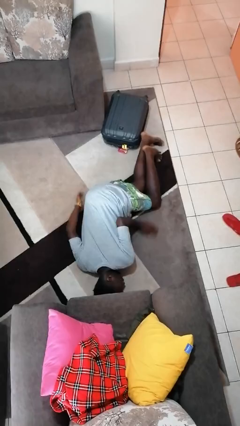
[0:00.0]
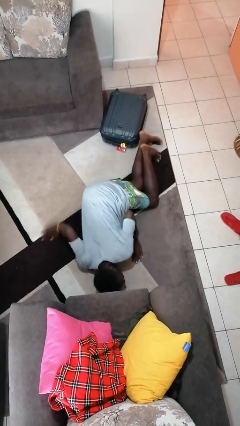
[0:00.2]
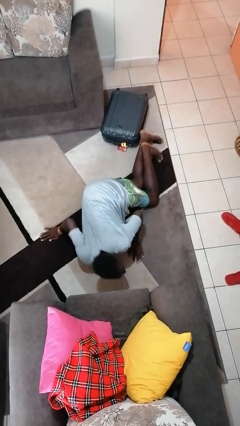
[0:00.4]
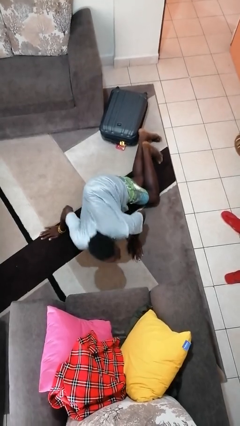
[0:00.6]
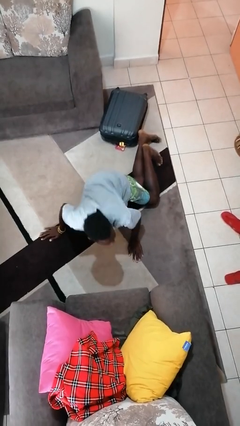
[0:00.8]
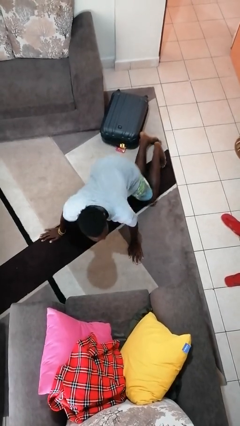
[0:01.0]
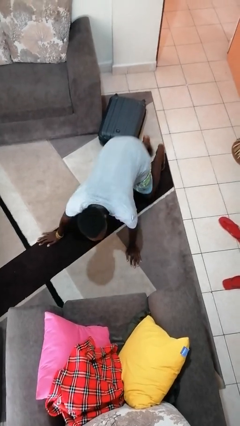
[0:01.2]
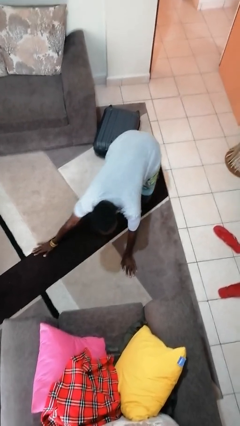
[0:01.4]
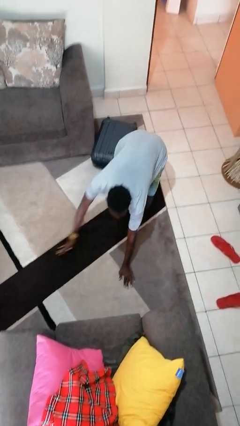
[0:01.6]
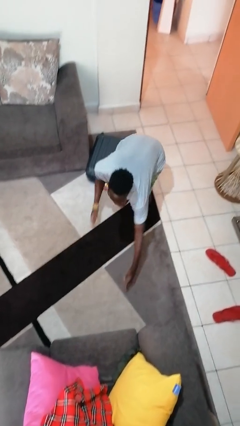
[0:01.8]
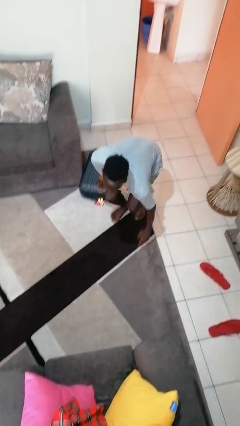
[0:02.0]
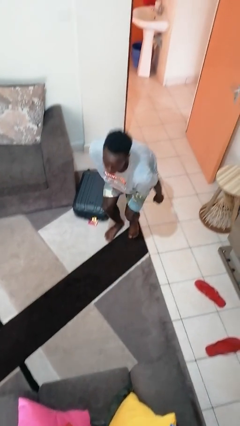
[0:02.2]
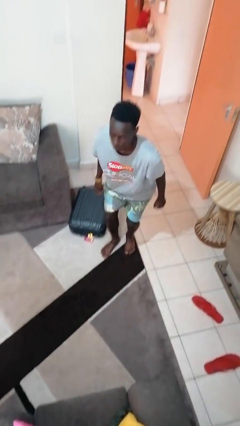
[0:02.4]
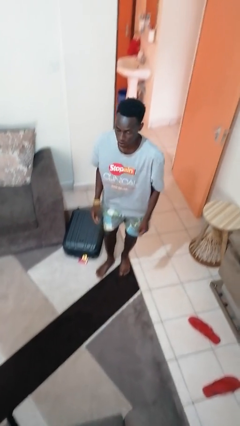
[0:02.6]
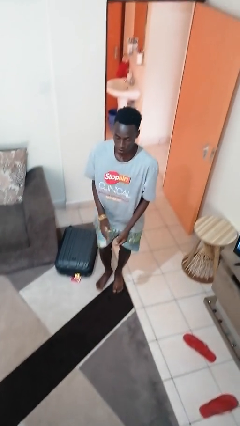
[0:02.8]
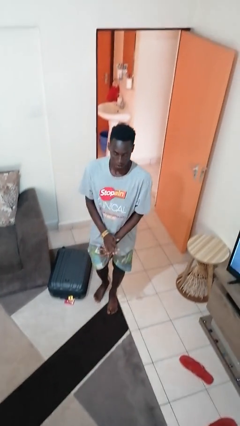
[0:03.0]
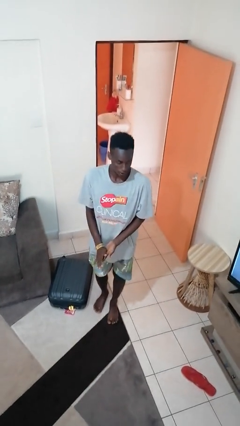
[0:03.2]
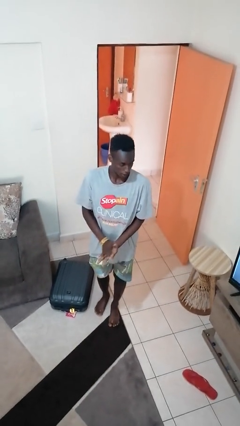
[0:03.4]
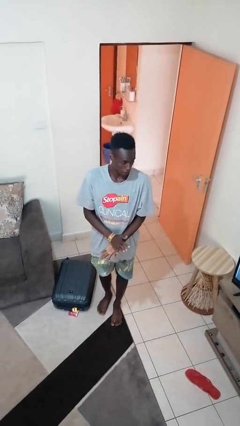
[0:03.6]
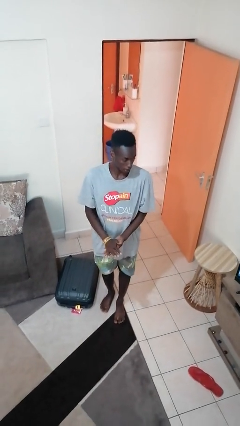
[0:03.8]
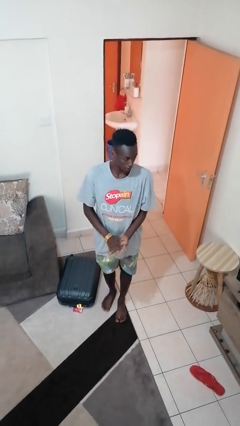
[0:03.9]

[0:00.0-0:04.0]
person stands up from floor

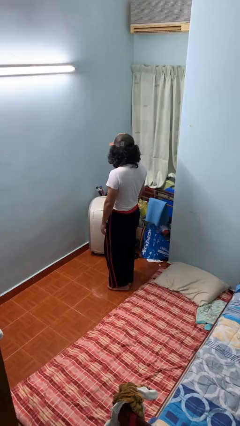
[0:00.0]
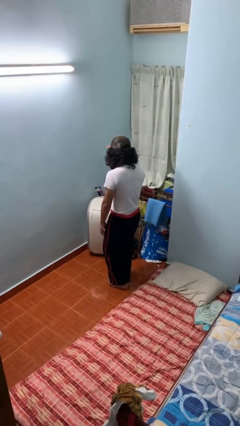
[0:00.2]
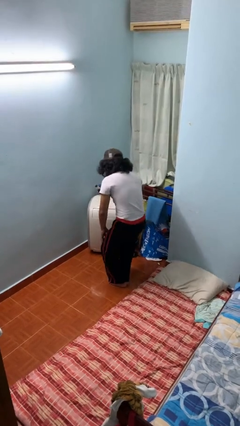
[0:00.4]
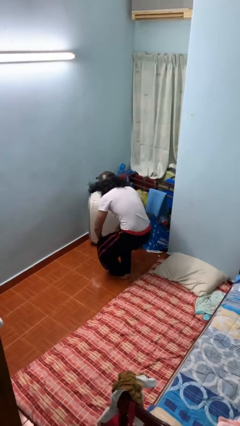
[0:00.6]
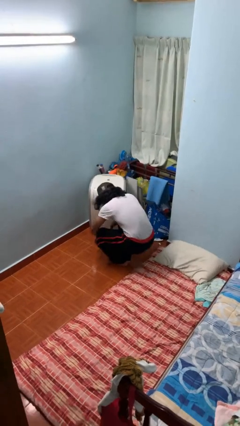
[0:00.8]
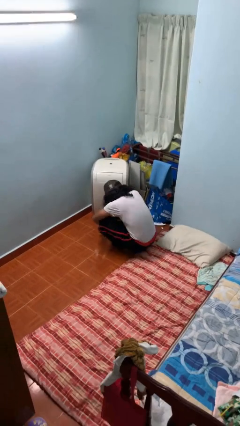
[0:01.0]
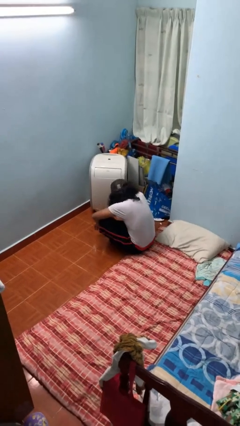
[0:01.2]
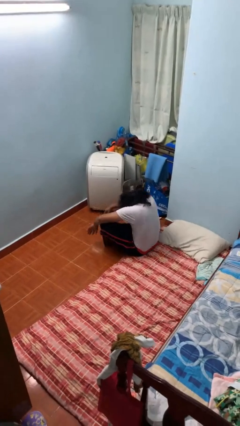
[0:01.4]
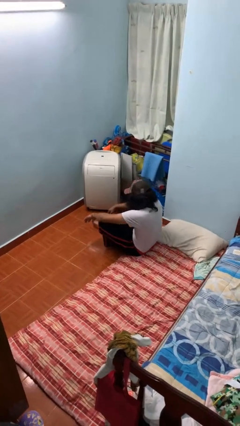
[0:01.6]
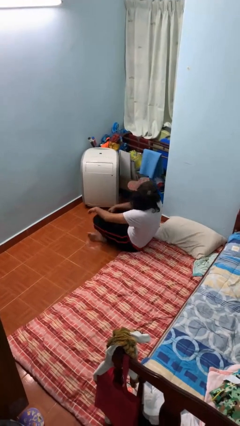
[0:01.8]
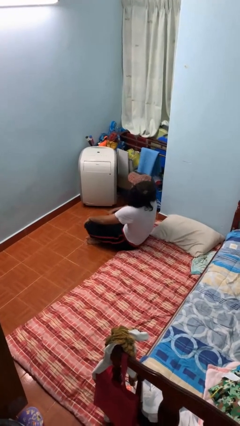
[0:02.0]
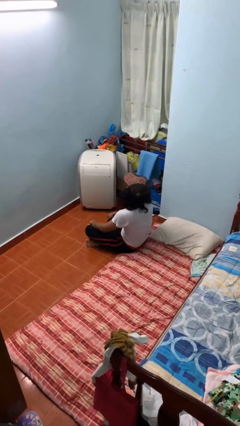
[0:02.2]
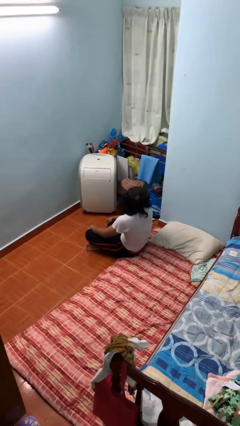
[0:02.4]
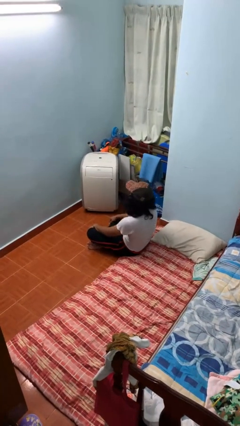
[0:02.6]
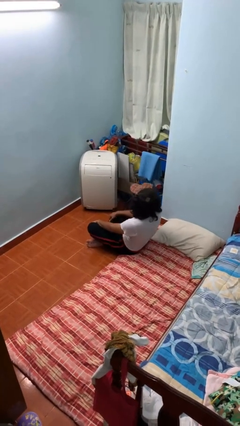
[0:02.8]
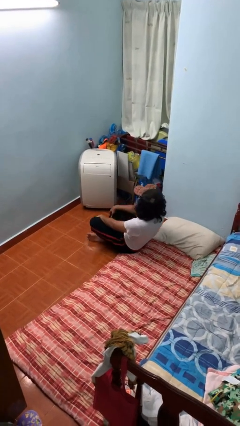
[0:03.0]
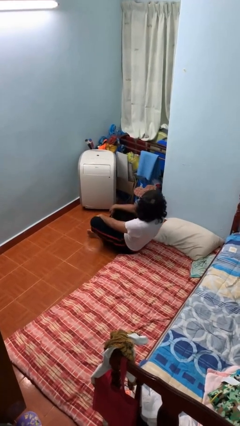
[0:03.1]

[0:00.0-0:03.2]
person sits crisscross

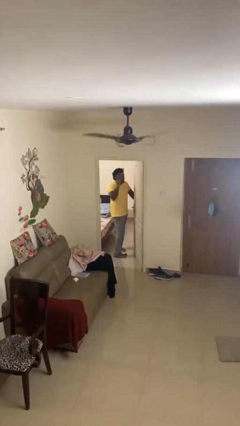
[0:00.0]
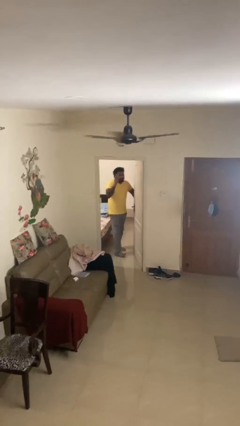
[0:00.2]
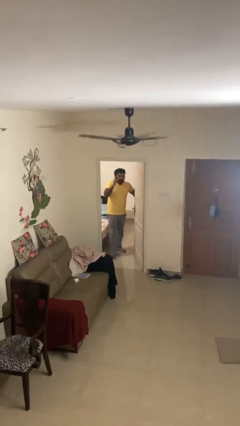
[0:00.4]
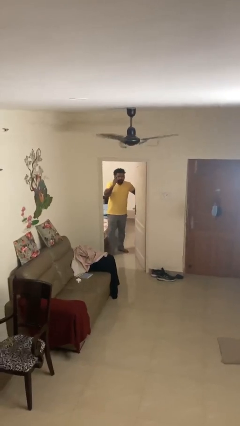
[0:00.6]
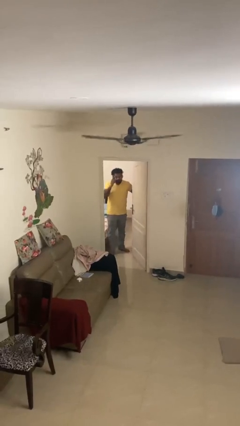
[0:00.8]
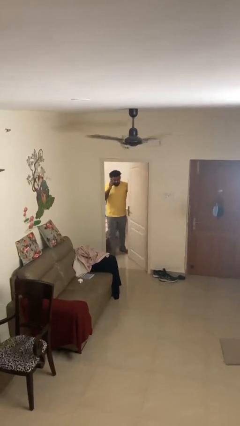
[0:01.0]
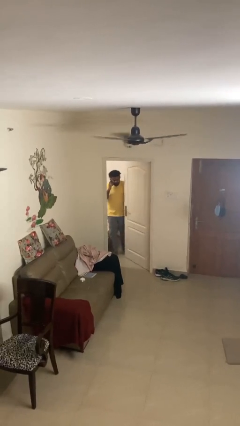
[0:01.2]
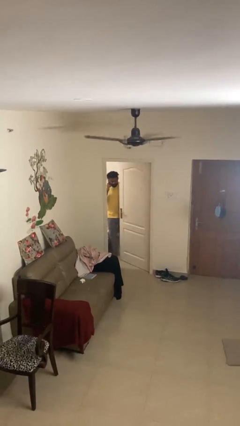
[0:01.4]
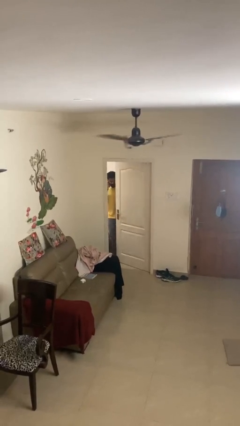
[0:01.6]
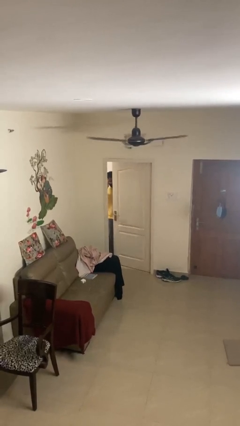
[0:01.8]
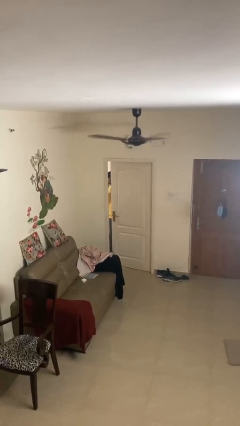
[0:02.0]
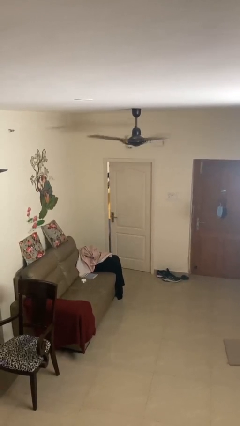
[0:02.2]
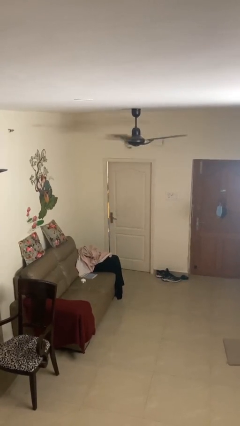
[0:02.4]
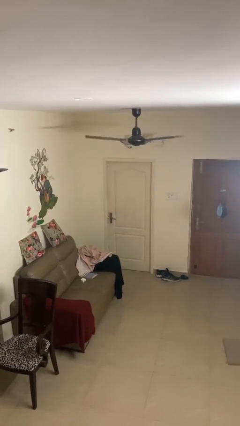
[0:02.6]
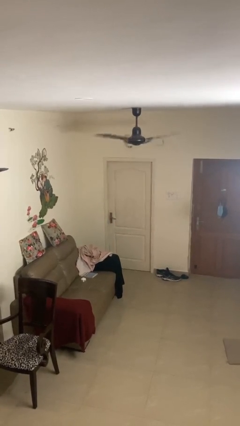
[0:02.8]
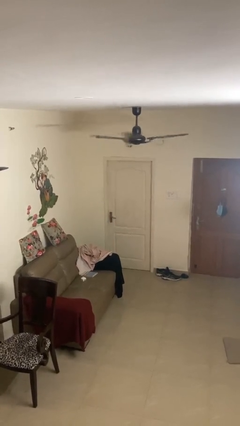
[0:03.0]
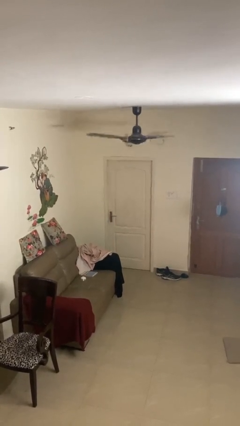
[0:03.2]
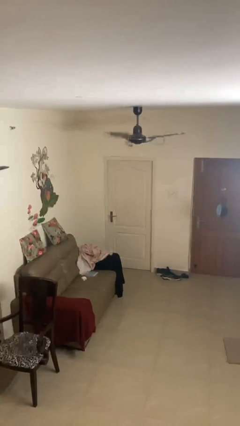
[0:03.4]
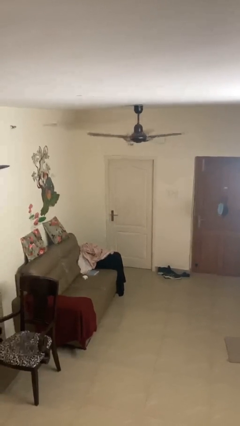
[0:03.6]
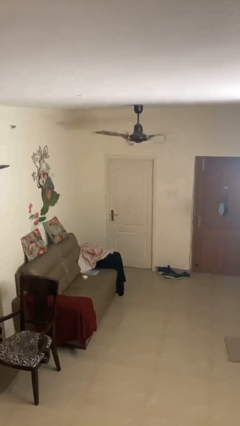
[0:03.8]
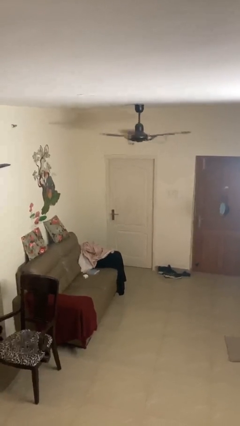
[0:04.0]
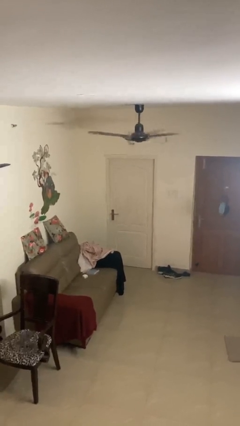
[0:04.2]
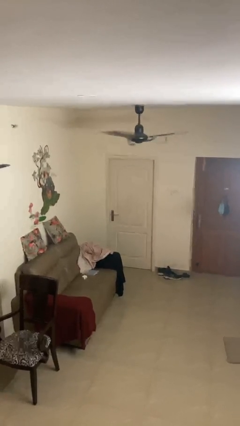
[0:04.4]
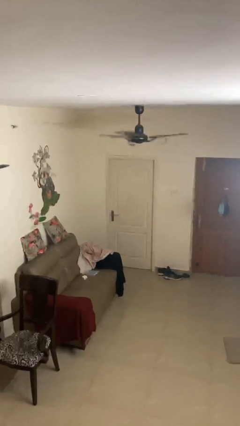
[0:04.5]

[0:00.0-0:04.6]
person closes facility door

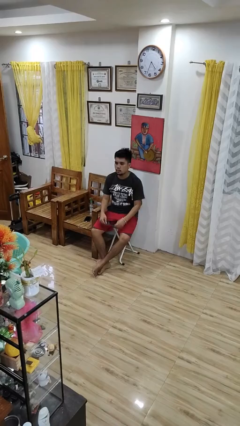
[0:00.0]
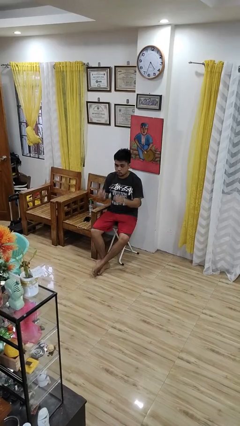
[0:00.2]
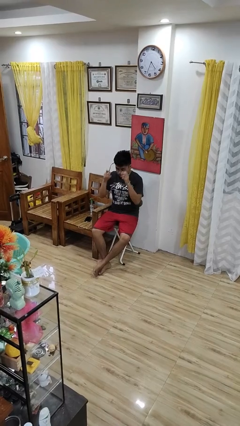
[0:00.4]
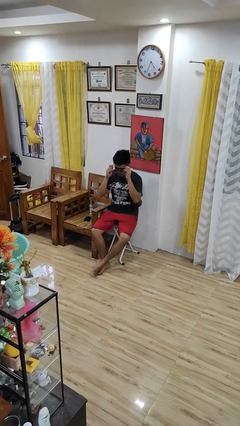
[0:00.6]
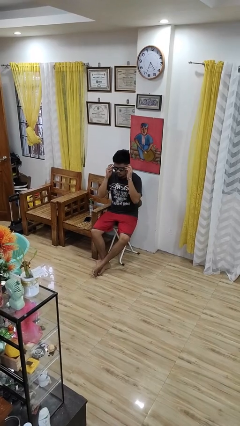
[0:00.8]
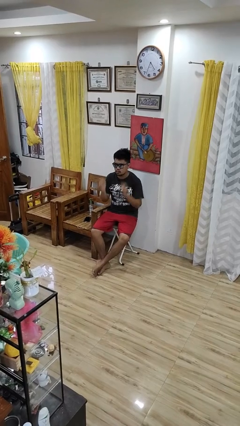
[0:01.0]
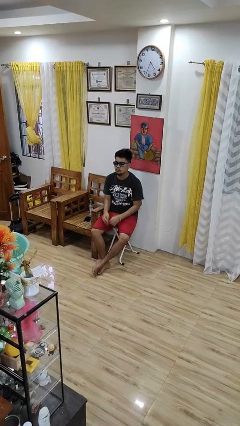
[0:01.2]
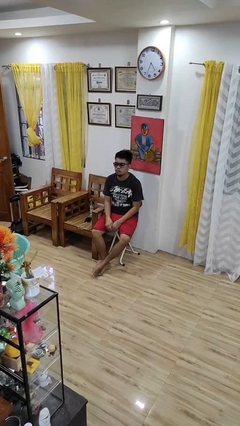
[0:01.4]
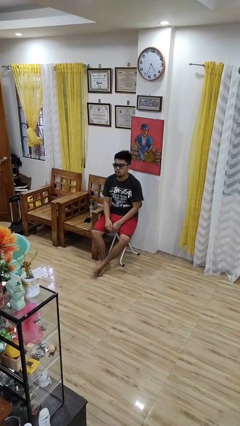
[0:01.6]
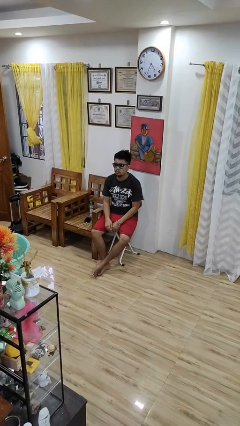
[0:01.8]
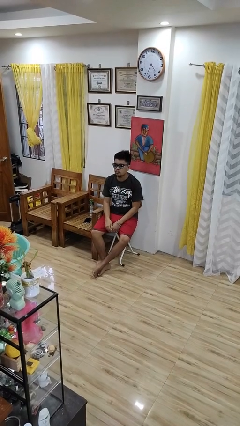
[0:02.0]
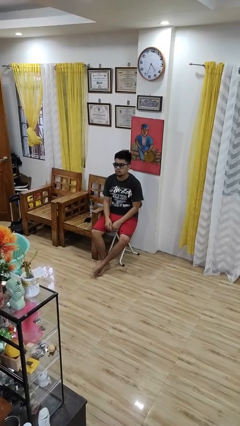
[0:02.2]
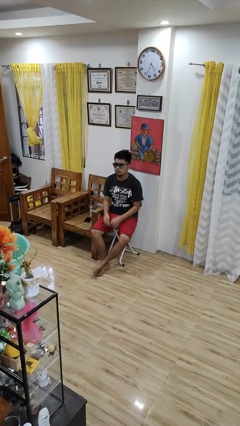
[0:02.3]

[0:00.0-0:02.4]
person puts on sunglasses

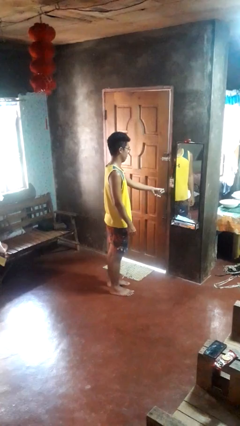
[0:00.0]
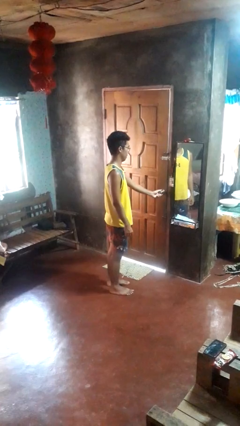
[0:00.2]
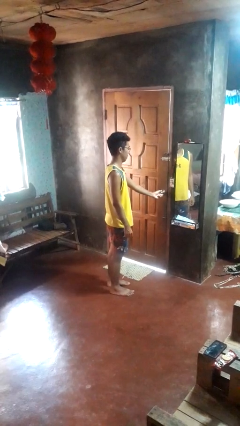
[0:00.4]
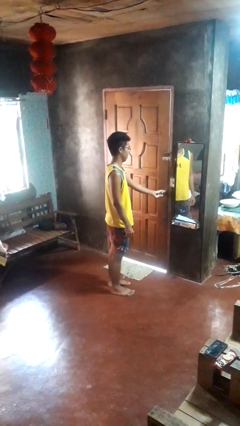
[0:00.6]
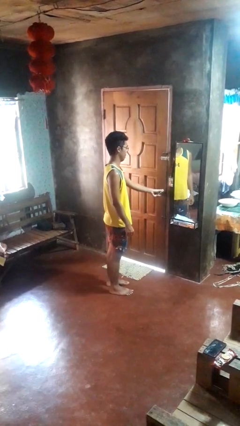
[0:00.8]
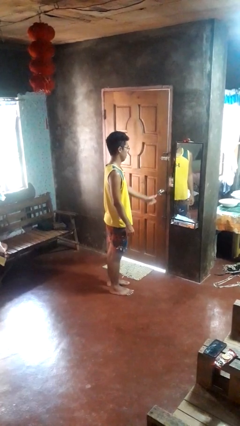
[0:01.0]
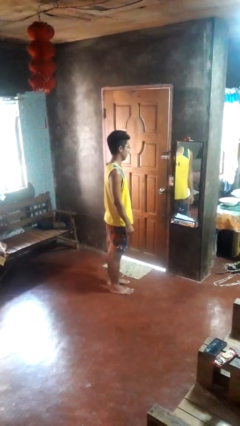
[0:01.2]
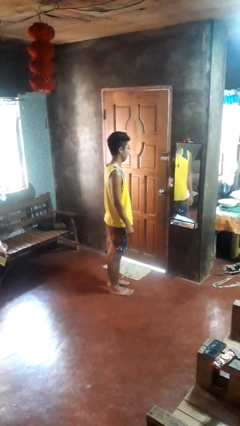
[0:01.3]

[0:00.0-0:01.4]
person unlocks door with keys

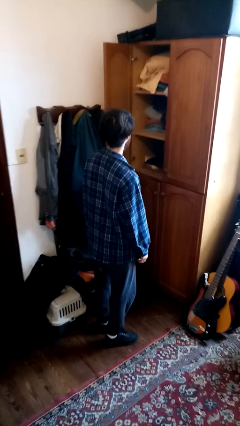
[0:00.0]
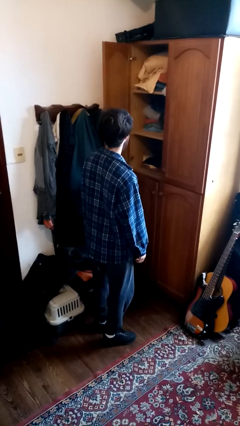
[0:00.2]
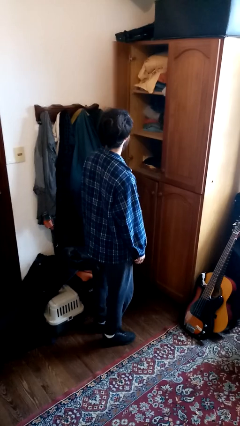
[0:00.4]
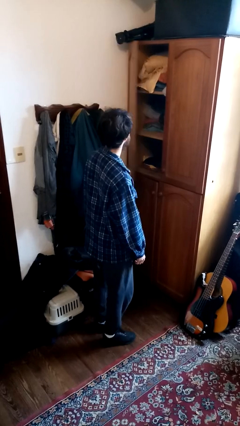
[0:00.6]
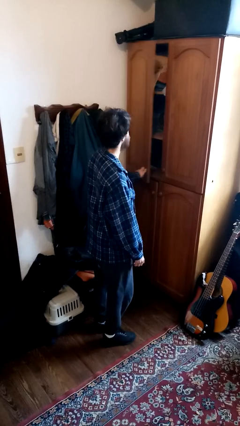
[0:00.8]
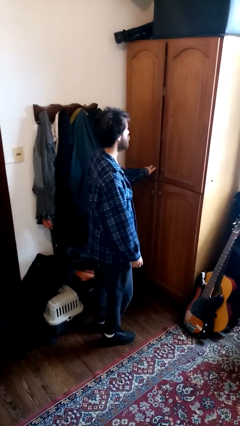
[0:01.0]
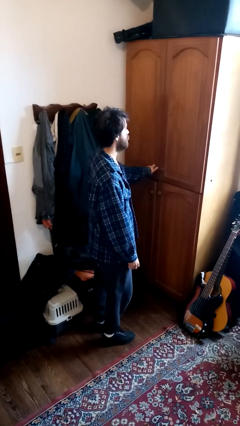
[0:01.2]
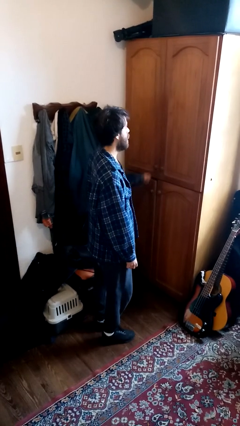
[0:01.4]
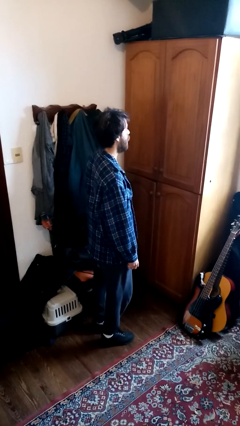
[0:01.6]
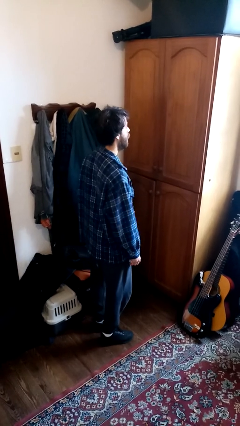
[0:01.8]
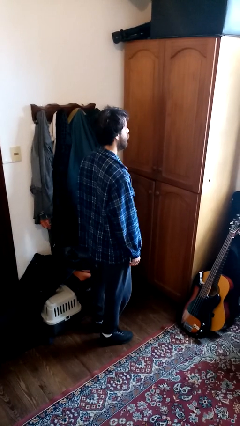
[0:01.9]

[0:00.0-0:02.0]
person closes dresser drawer
